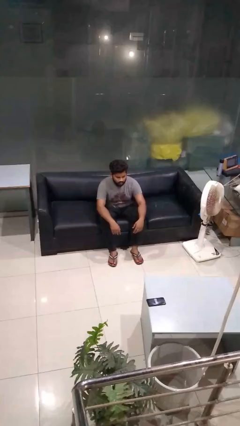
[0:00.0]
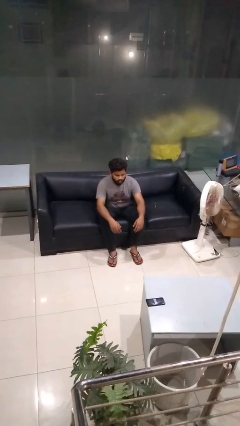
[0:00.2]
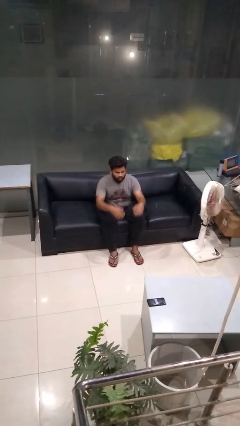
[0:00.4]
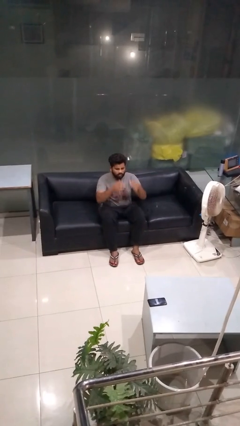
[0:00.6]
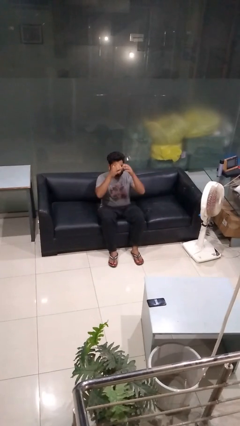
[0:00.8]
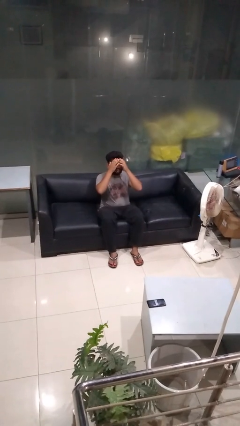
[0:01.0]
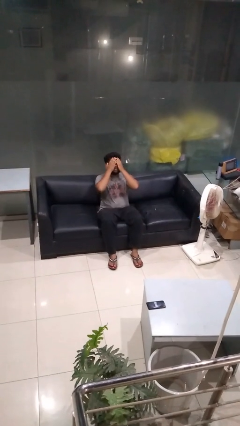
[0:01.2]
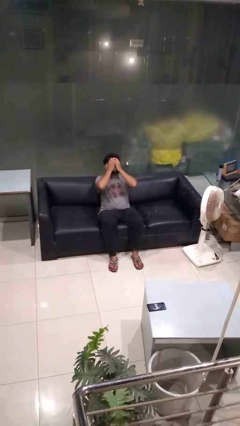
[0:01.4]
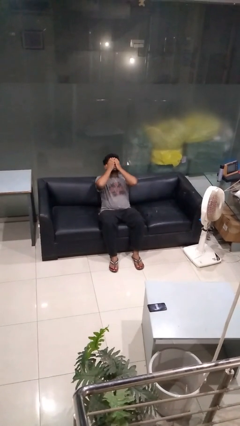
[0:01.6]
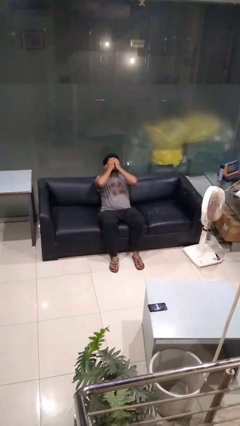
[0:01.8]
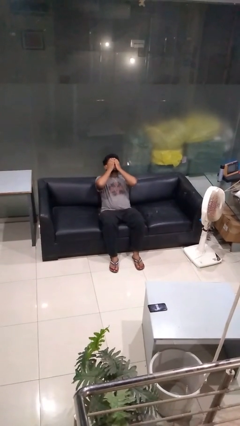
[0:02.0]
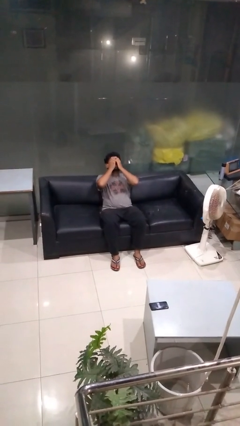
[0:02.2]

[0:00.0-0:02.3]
person covers face with hands

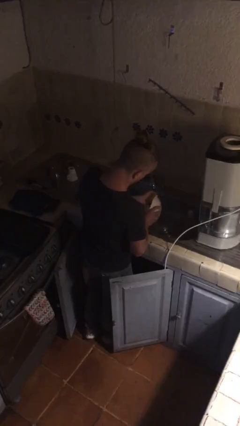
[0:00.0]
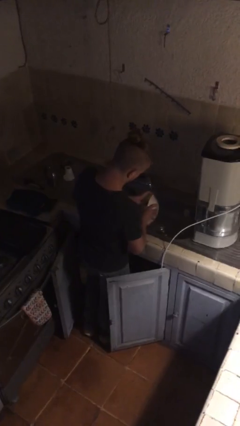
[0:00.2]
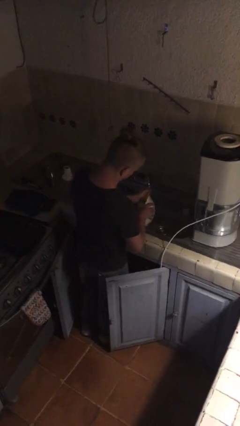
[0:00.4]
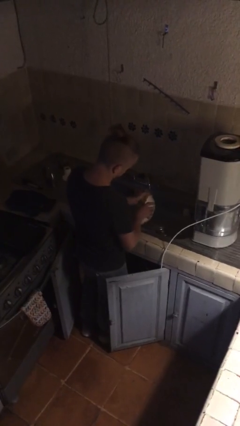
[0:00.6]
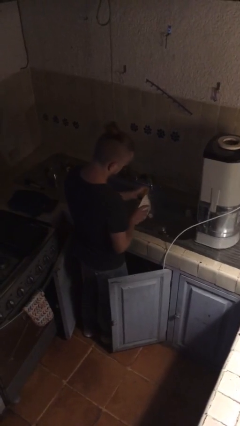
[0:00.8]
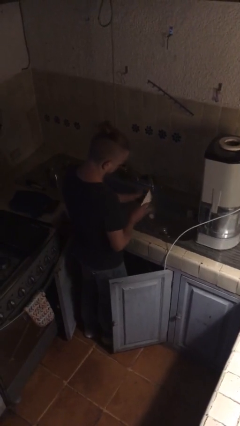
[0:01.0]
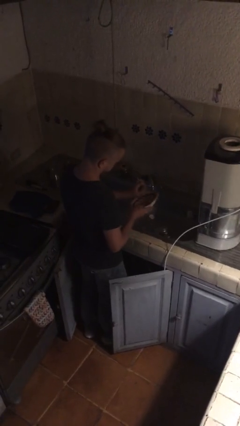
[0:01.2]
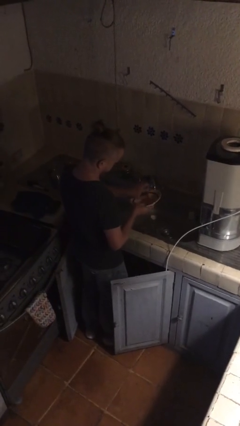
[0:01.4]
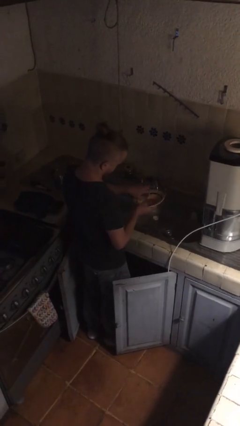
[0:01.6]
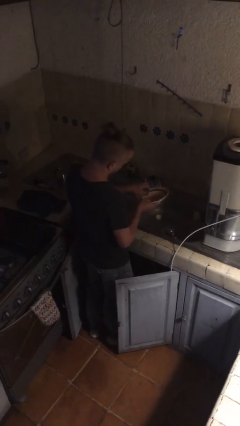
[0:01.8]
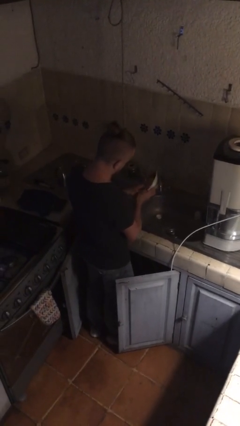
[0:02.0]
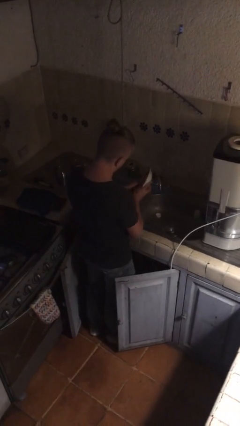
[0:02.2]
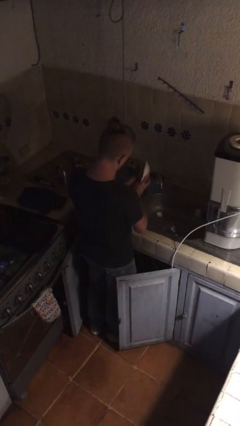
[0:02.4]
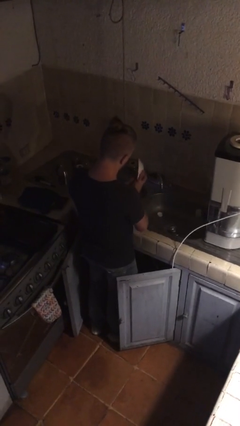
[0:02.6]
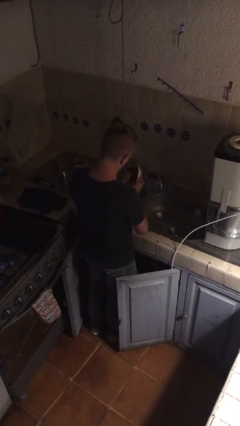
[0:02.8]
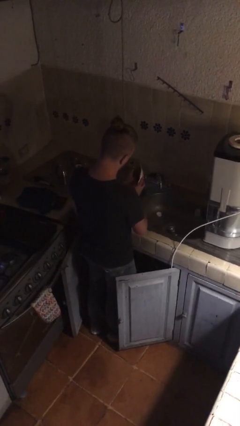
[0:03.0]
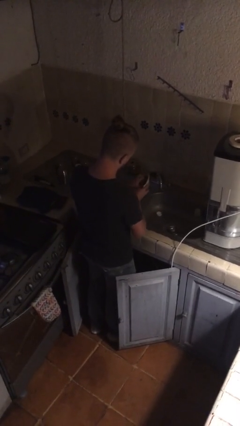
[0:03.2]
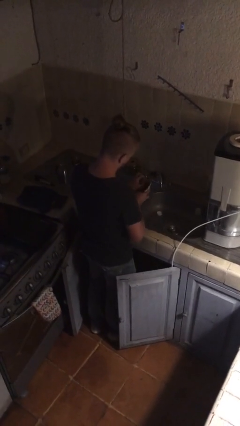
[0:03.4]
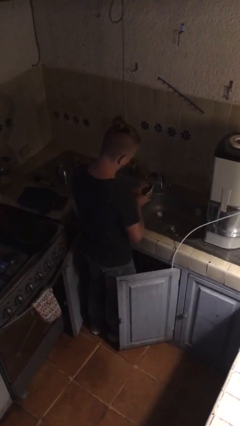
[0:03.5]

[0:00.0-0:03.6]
person washes dish

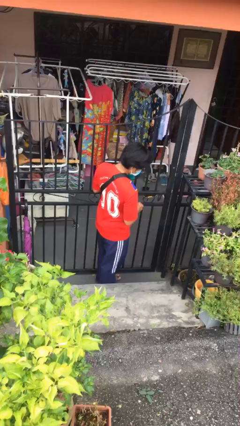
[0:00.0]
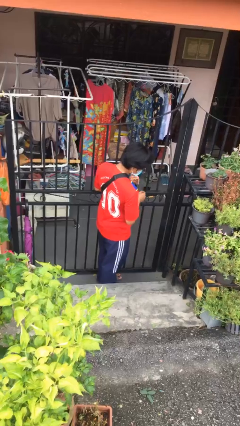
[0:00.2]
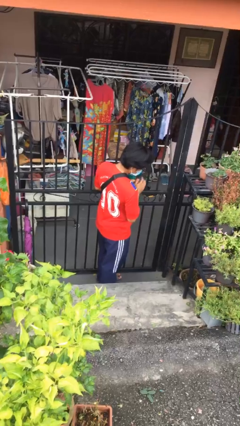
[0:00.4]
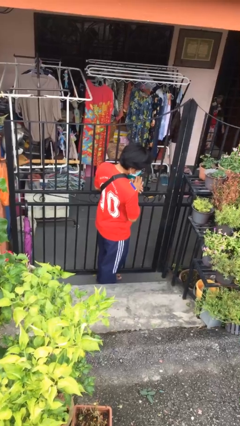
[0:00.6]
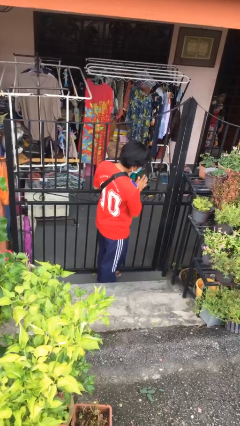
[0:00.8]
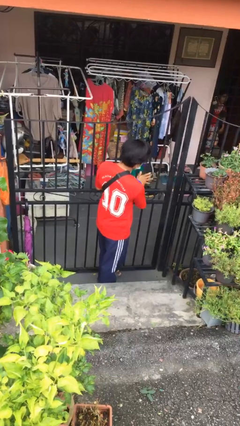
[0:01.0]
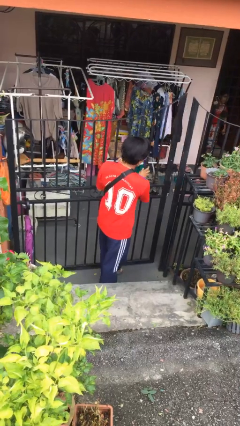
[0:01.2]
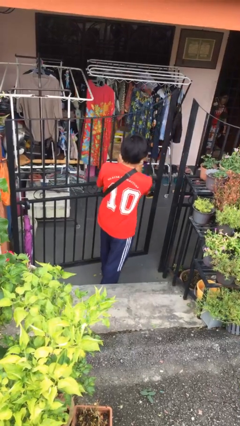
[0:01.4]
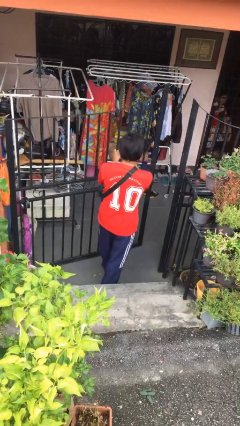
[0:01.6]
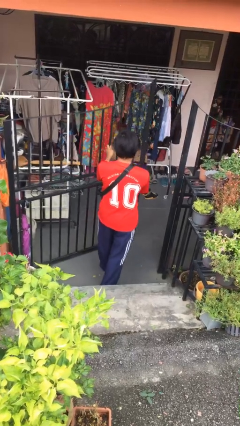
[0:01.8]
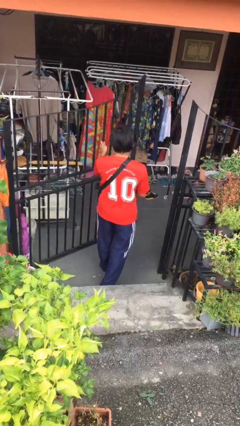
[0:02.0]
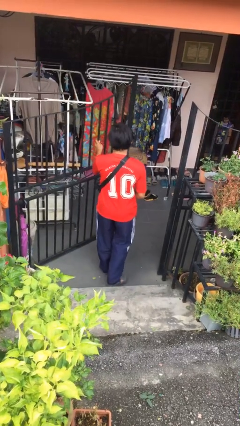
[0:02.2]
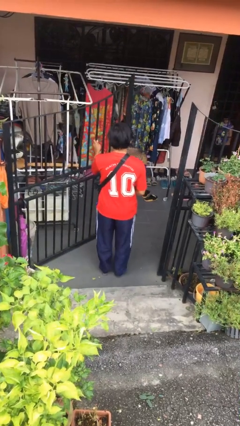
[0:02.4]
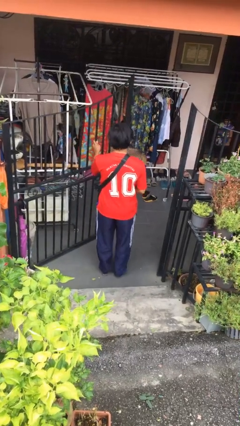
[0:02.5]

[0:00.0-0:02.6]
person opens facility door

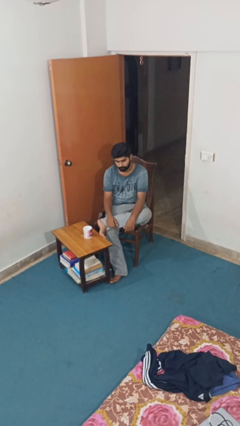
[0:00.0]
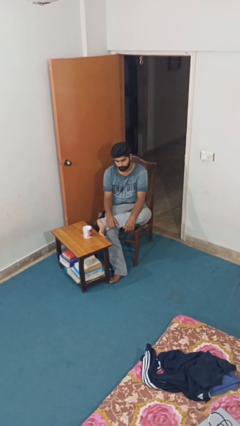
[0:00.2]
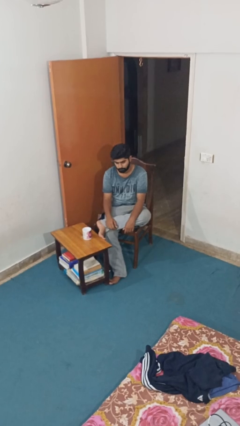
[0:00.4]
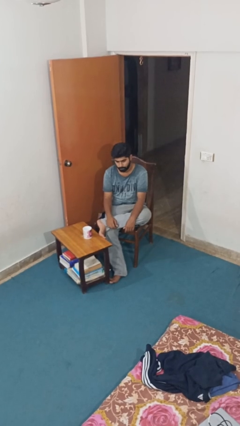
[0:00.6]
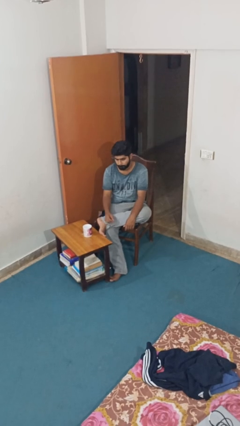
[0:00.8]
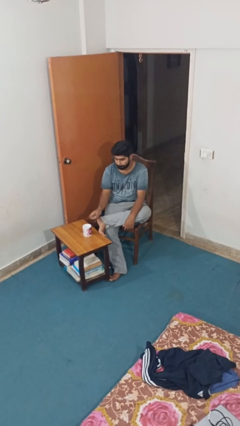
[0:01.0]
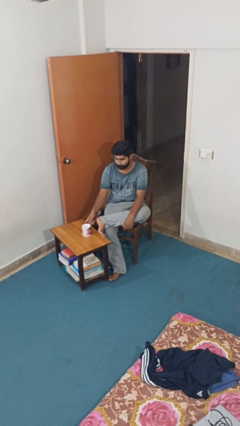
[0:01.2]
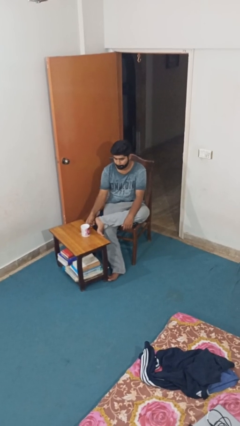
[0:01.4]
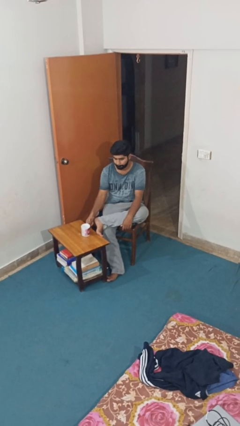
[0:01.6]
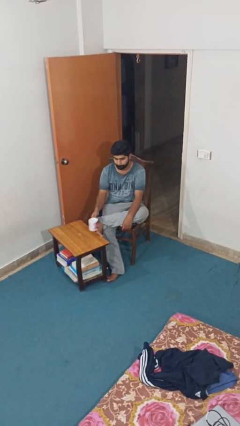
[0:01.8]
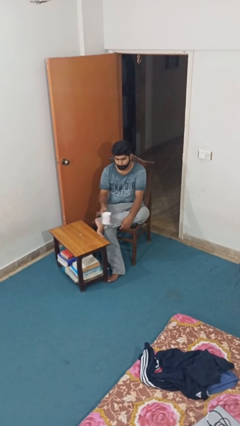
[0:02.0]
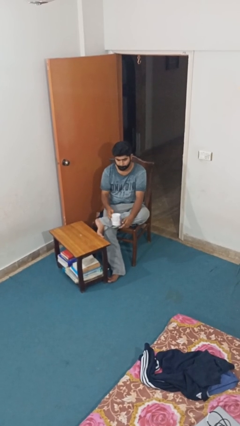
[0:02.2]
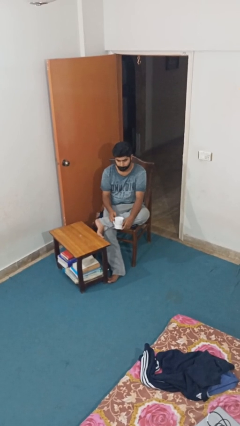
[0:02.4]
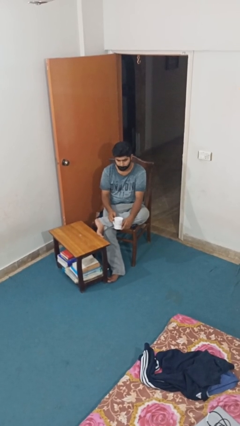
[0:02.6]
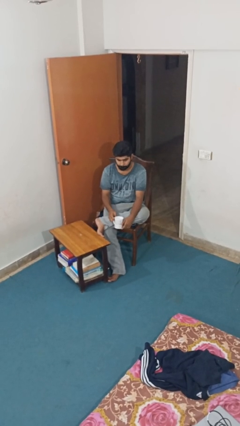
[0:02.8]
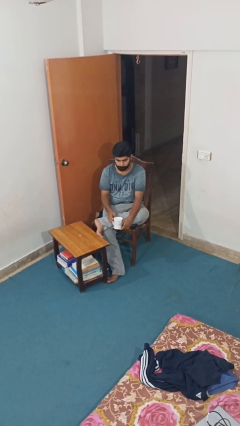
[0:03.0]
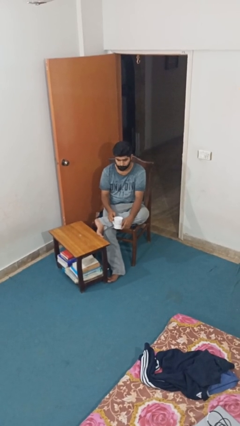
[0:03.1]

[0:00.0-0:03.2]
person picks up object from table

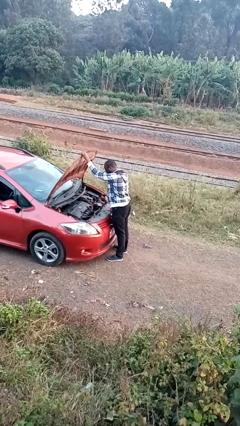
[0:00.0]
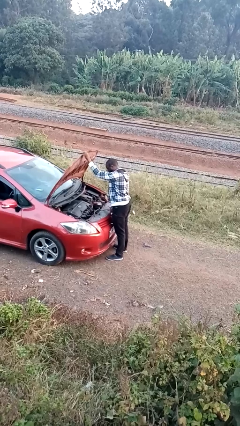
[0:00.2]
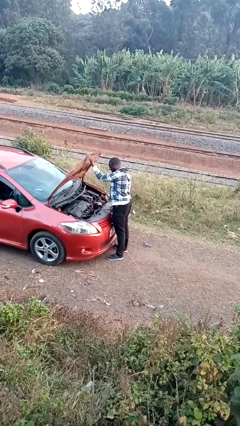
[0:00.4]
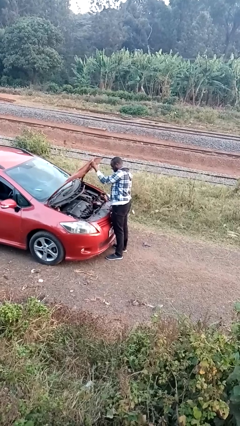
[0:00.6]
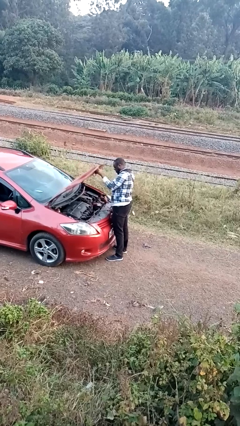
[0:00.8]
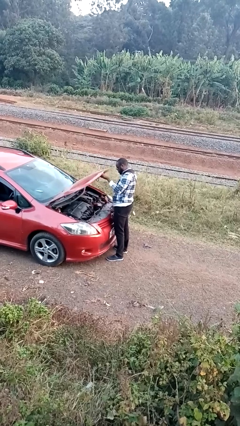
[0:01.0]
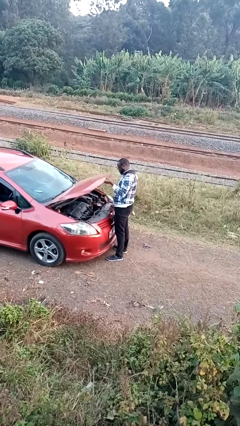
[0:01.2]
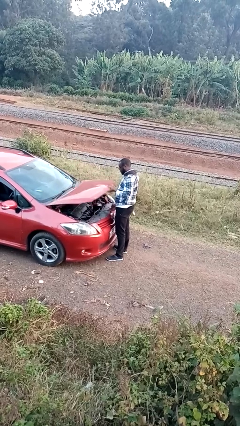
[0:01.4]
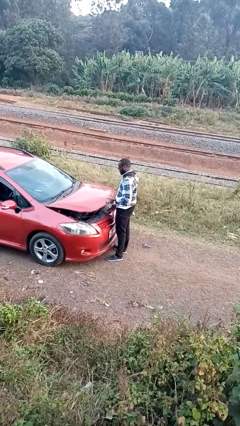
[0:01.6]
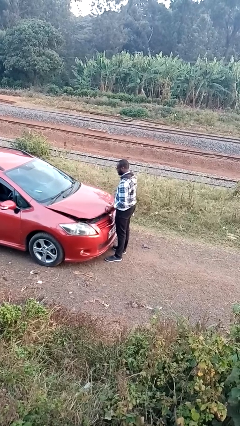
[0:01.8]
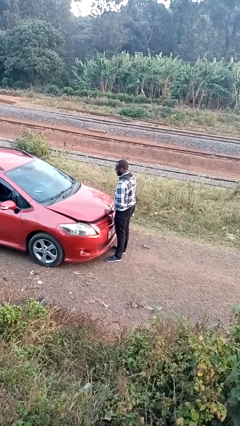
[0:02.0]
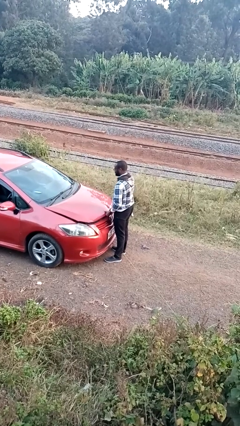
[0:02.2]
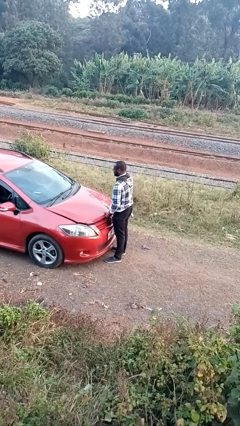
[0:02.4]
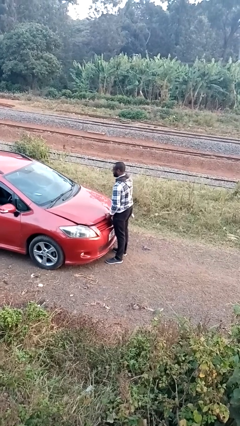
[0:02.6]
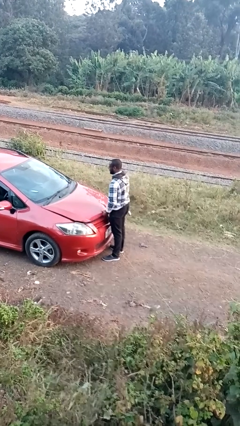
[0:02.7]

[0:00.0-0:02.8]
person closes car hood

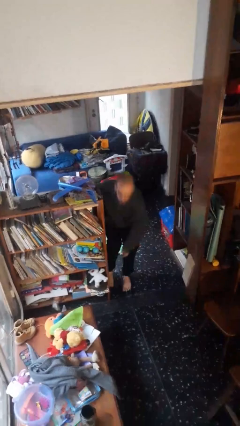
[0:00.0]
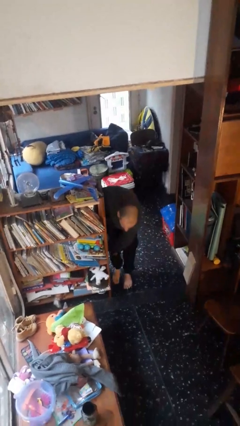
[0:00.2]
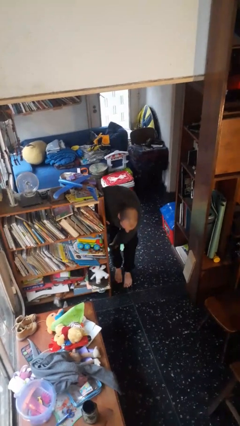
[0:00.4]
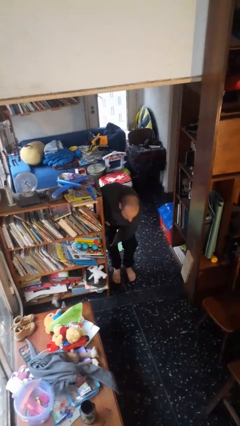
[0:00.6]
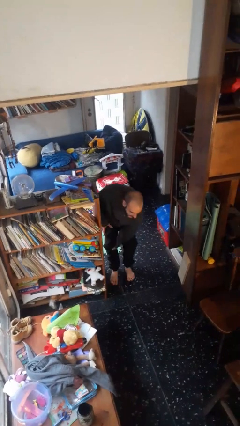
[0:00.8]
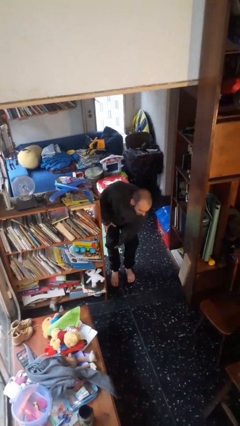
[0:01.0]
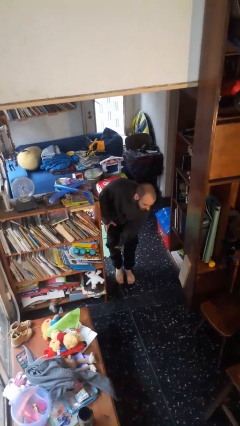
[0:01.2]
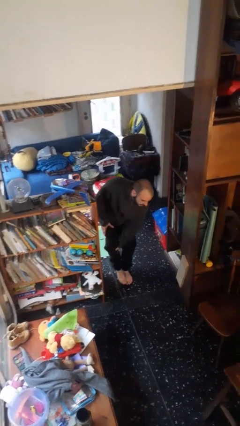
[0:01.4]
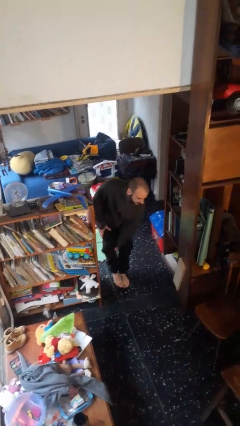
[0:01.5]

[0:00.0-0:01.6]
person stubs toe

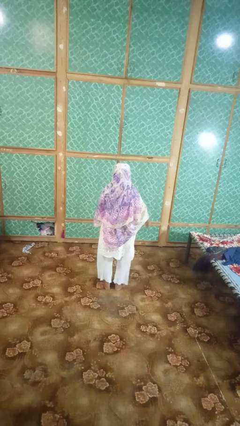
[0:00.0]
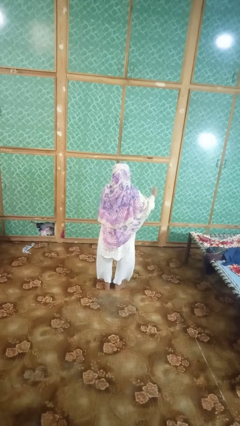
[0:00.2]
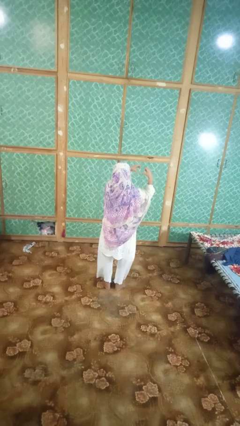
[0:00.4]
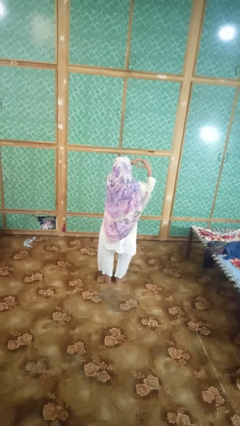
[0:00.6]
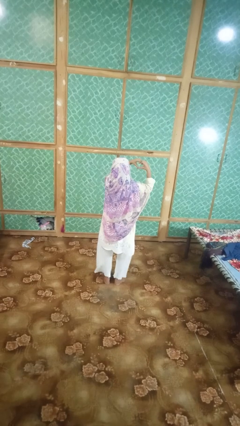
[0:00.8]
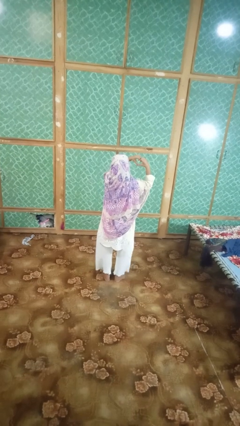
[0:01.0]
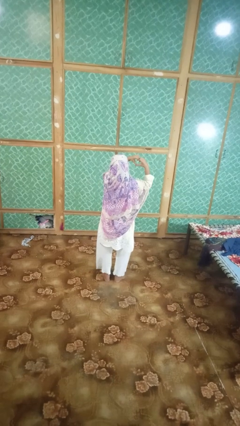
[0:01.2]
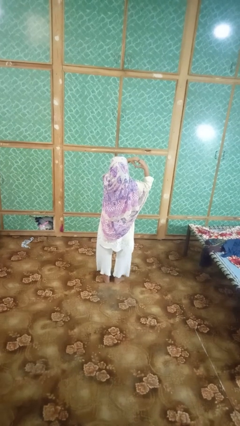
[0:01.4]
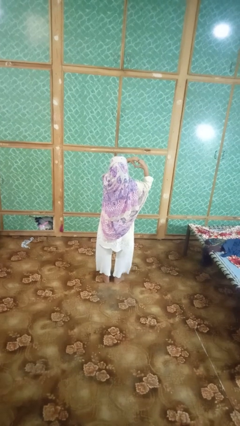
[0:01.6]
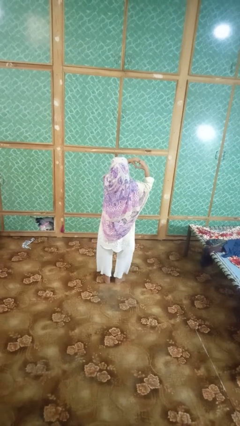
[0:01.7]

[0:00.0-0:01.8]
person gestures heart
